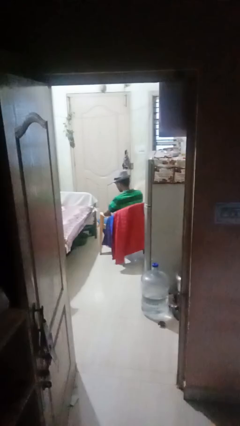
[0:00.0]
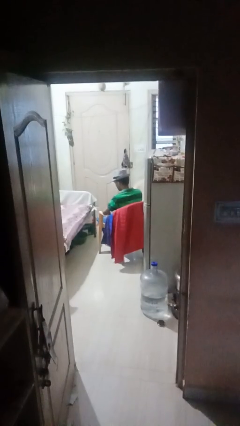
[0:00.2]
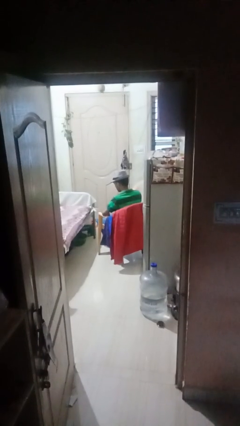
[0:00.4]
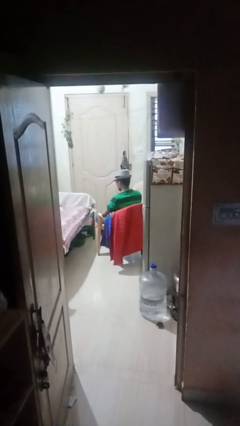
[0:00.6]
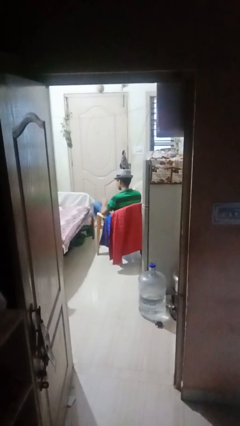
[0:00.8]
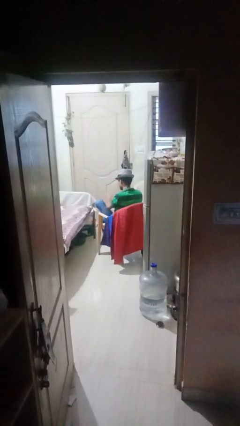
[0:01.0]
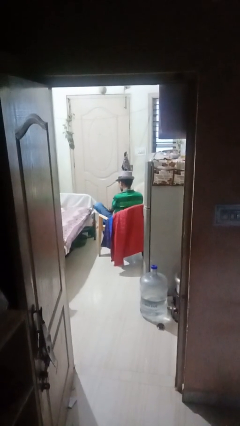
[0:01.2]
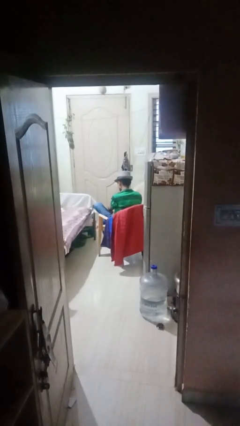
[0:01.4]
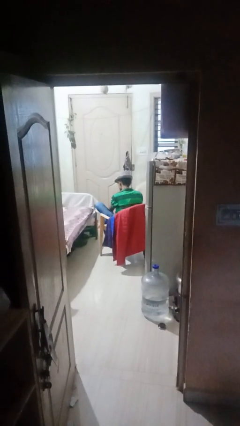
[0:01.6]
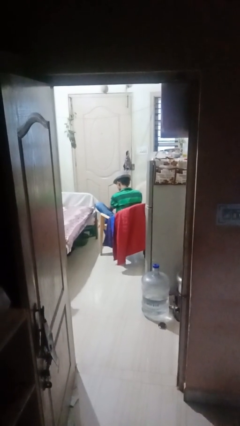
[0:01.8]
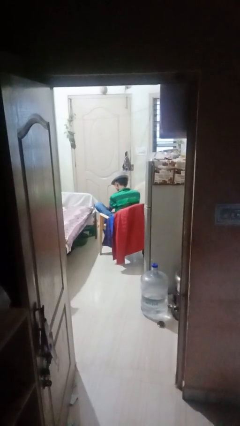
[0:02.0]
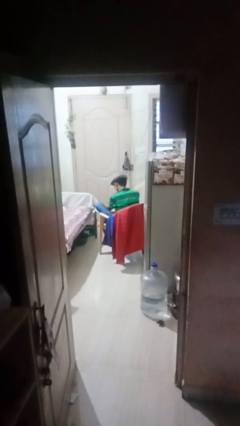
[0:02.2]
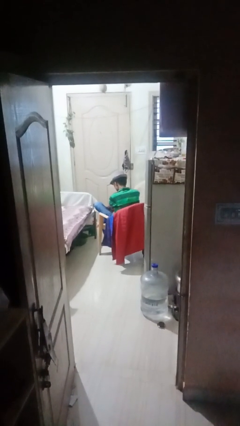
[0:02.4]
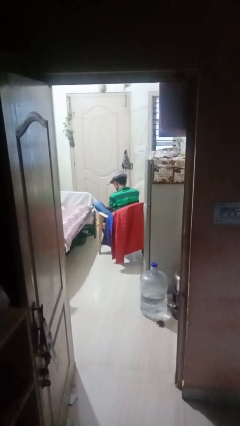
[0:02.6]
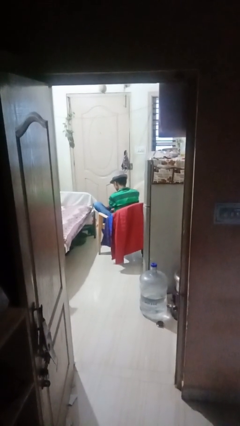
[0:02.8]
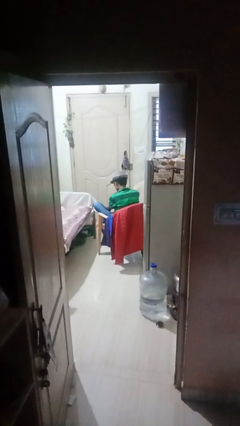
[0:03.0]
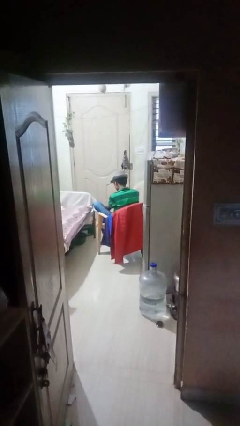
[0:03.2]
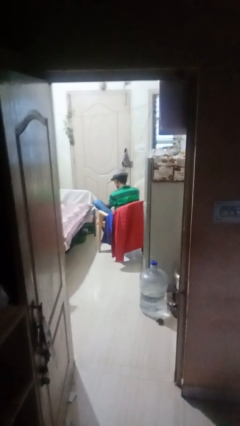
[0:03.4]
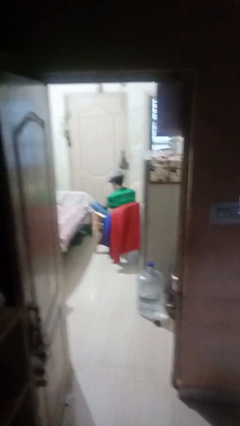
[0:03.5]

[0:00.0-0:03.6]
person rubs foot

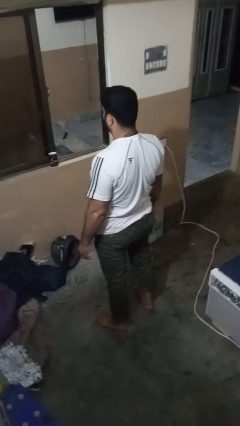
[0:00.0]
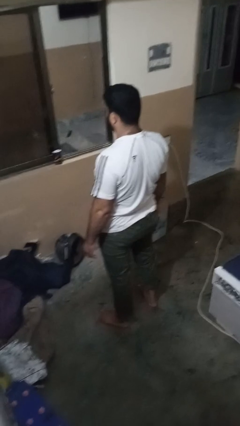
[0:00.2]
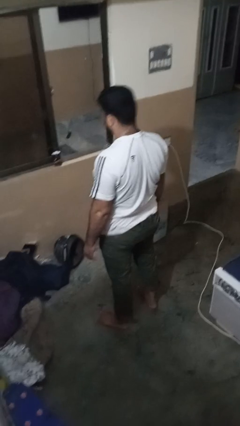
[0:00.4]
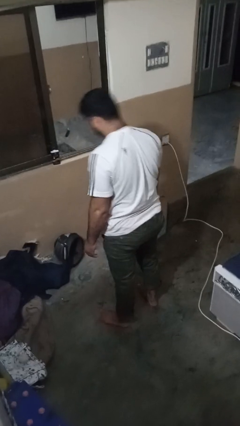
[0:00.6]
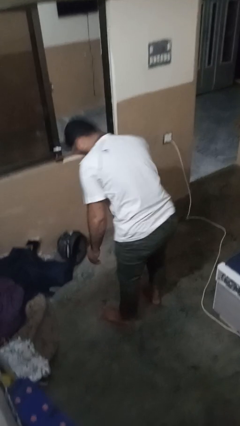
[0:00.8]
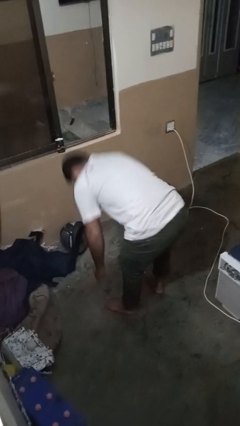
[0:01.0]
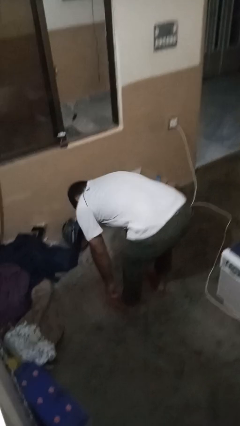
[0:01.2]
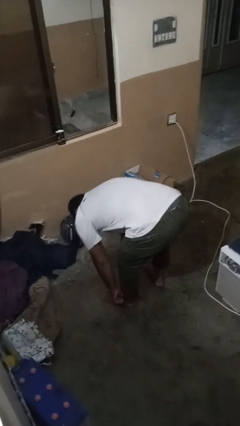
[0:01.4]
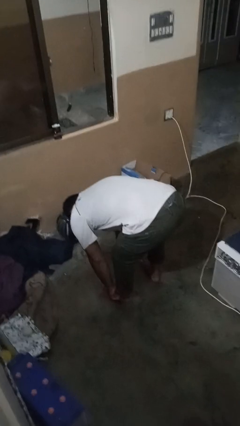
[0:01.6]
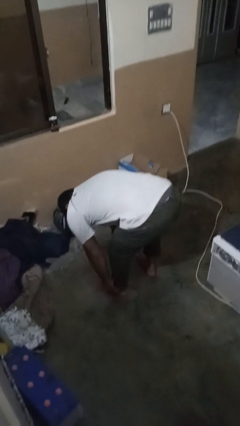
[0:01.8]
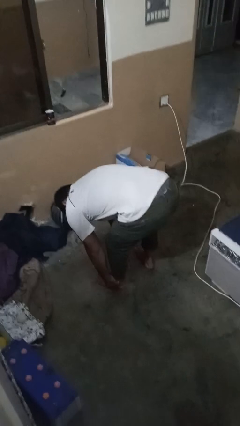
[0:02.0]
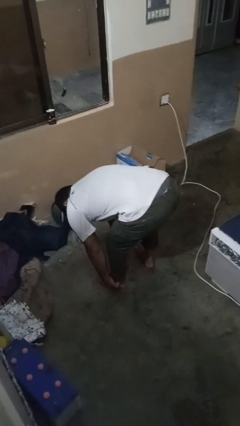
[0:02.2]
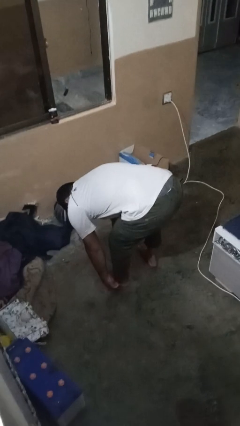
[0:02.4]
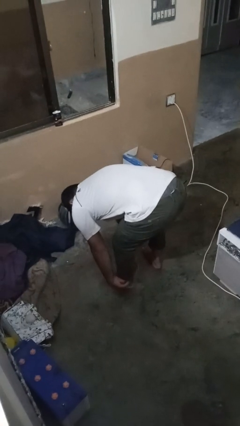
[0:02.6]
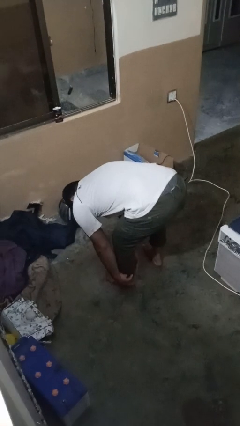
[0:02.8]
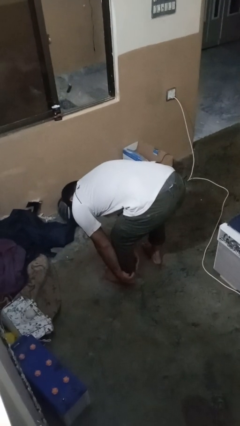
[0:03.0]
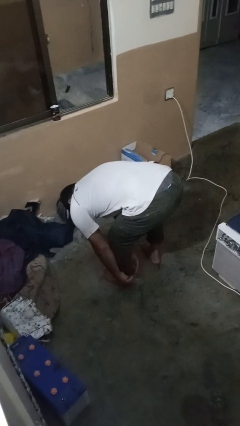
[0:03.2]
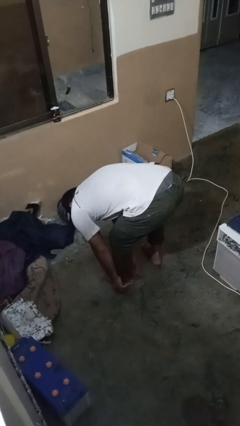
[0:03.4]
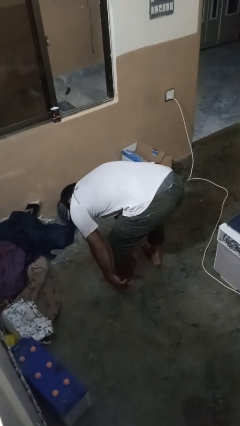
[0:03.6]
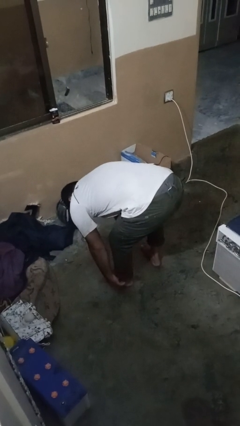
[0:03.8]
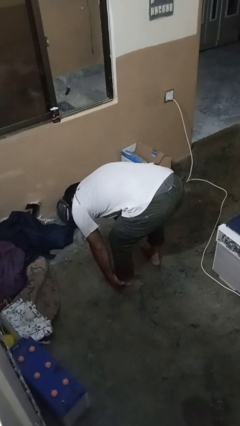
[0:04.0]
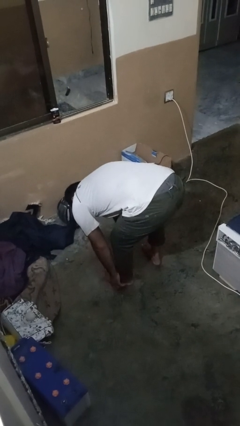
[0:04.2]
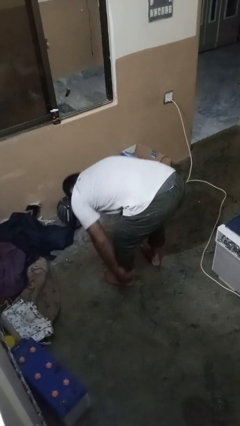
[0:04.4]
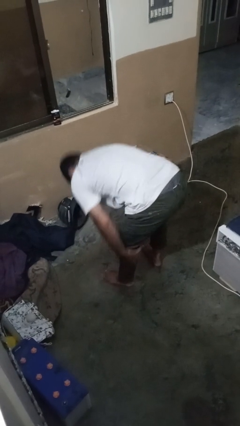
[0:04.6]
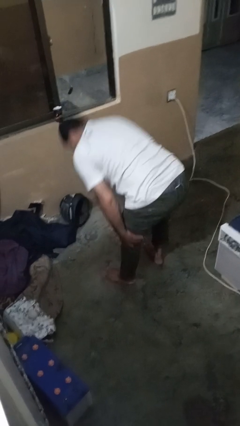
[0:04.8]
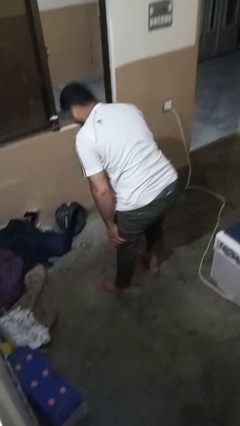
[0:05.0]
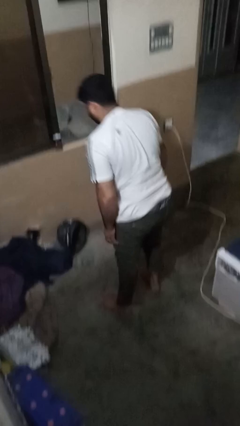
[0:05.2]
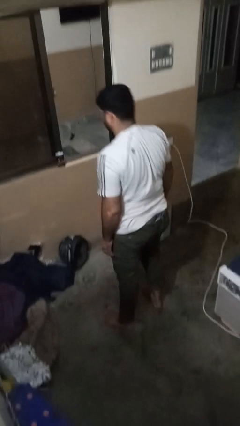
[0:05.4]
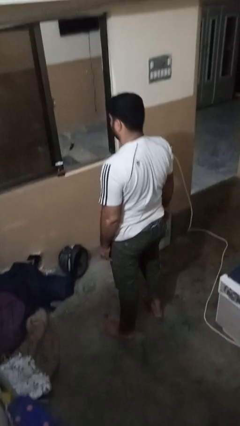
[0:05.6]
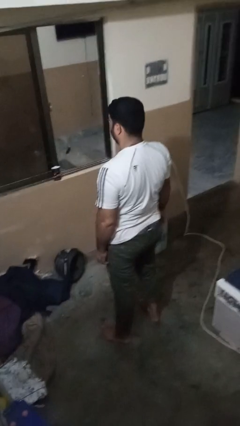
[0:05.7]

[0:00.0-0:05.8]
person hikes up pants

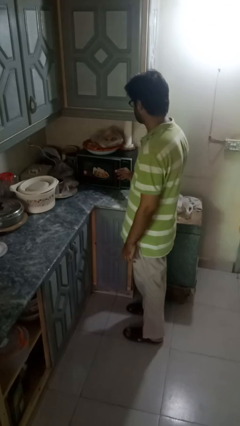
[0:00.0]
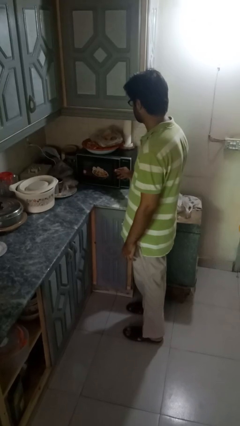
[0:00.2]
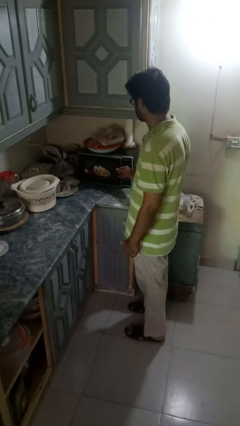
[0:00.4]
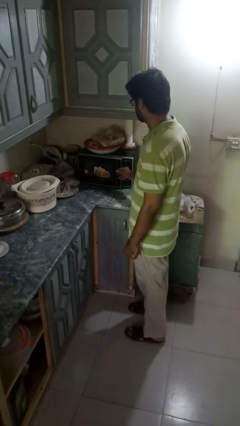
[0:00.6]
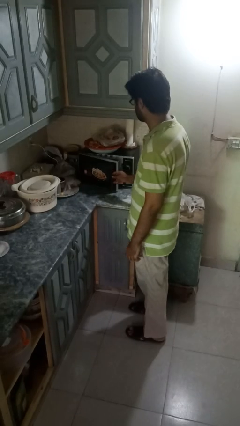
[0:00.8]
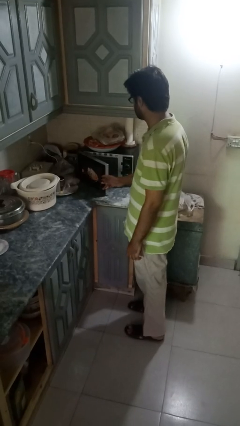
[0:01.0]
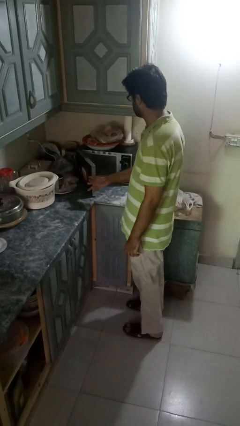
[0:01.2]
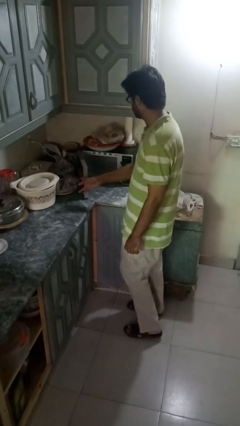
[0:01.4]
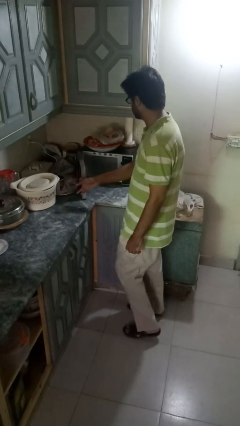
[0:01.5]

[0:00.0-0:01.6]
person opens microwave

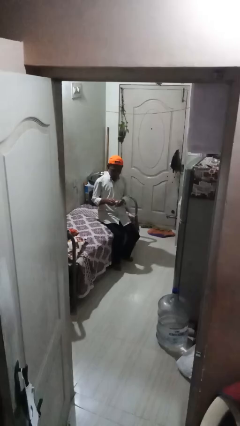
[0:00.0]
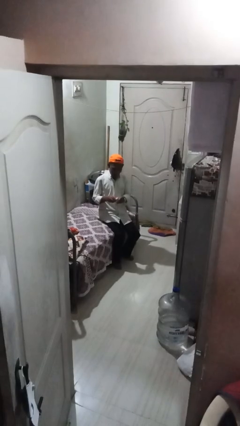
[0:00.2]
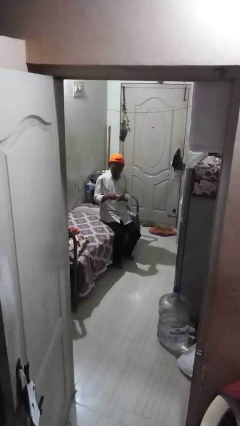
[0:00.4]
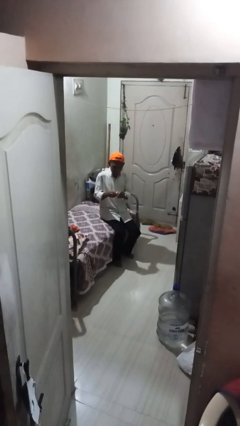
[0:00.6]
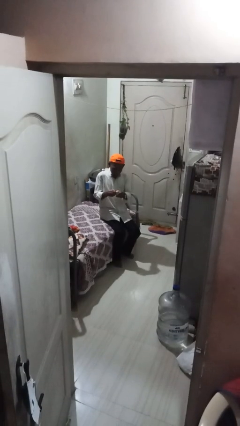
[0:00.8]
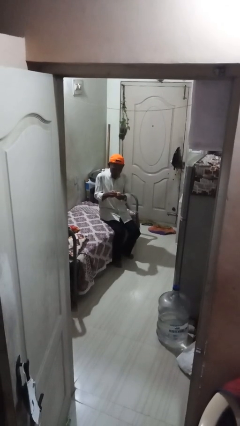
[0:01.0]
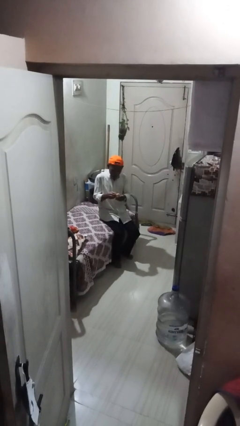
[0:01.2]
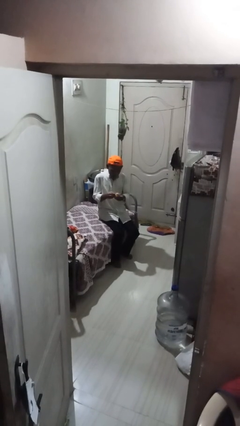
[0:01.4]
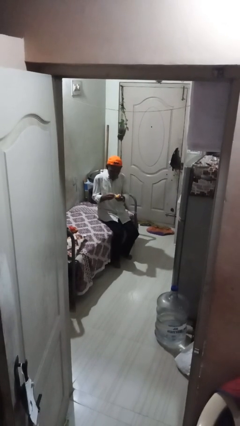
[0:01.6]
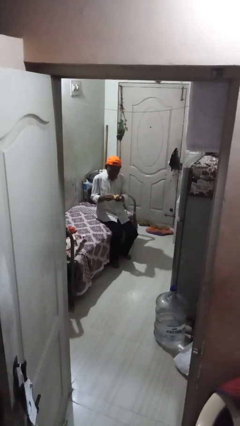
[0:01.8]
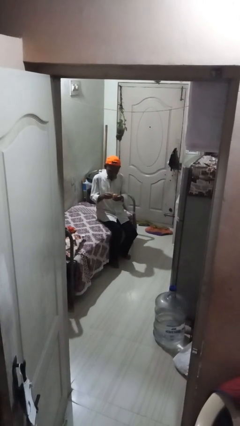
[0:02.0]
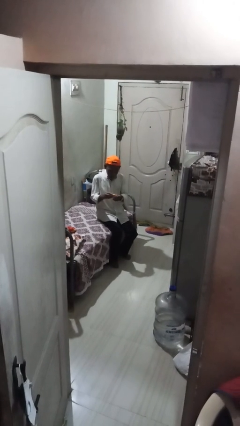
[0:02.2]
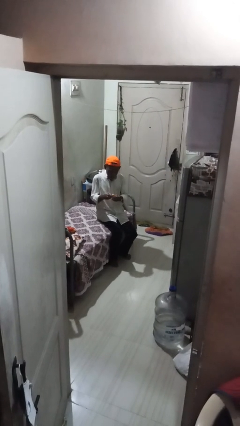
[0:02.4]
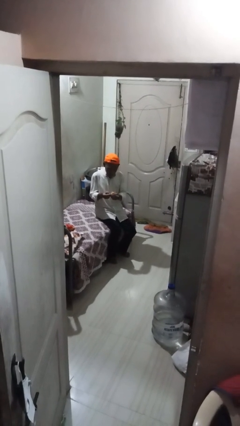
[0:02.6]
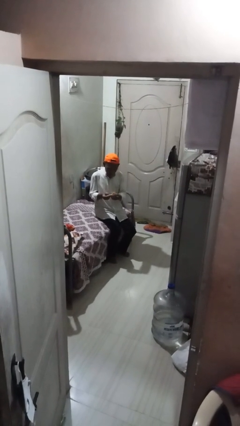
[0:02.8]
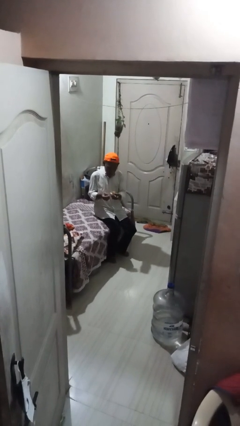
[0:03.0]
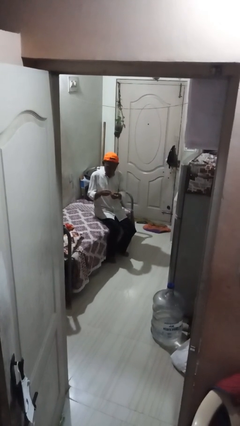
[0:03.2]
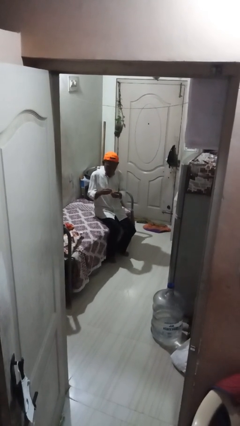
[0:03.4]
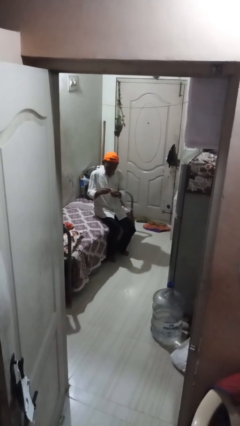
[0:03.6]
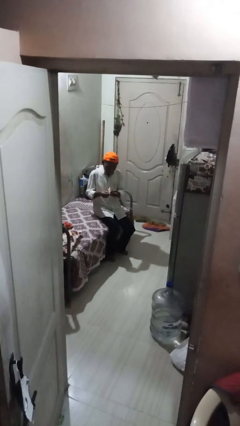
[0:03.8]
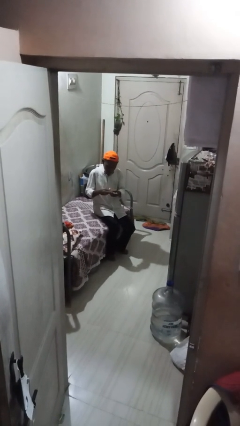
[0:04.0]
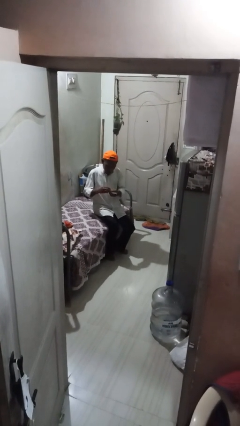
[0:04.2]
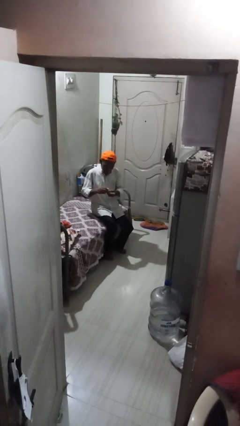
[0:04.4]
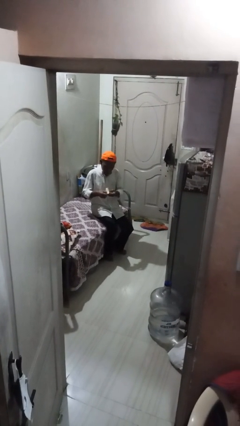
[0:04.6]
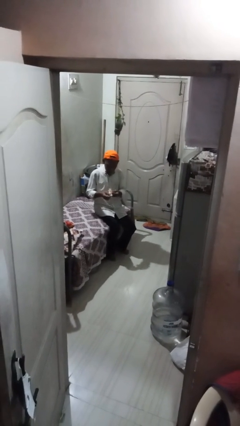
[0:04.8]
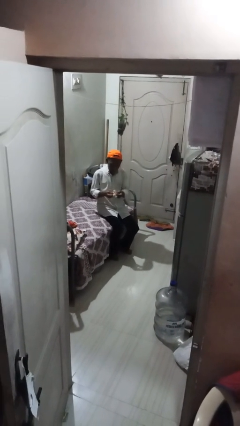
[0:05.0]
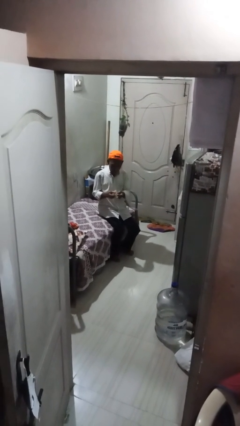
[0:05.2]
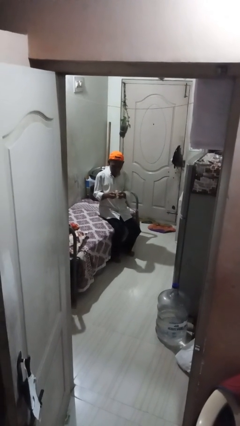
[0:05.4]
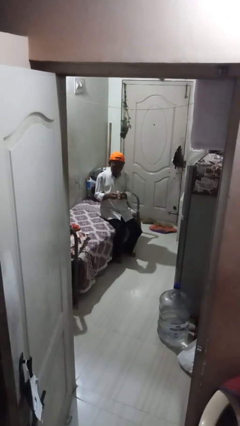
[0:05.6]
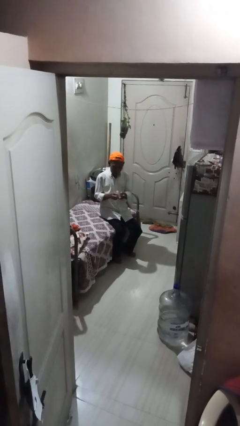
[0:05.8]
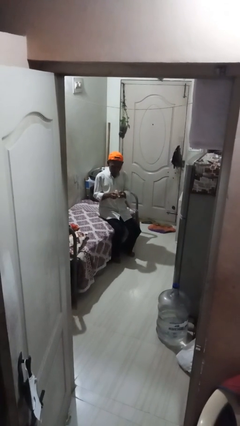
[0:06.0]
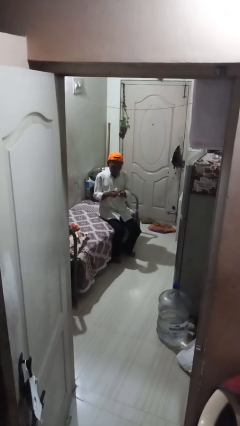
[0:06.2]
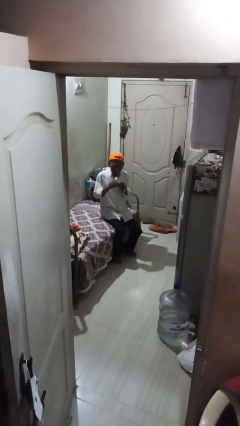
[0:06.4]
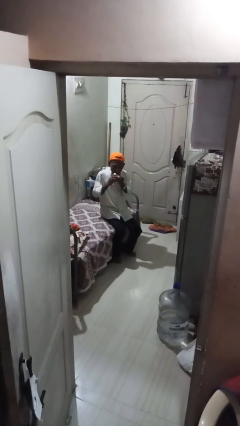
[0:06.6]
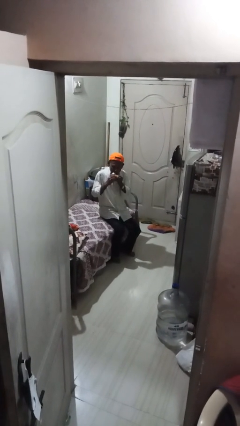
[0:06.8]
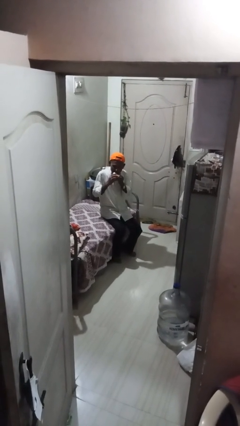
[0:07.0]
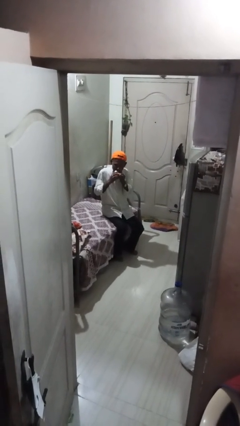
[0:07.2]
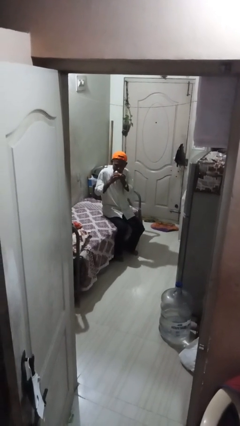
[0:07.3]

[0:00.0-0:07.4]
person eats banana

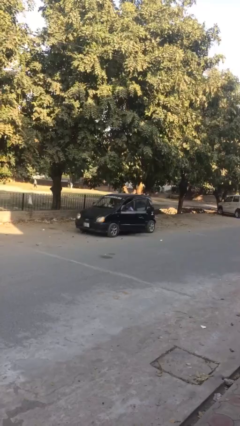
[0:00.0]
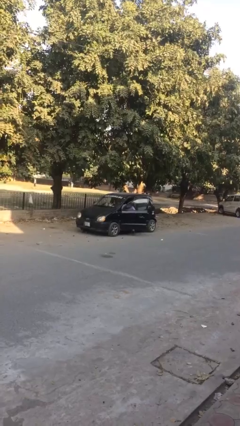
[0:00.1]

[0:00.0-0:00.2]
car drops off person
